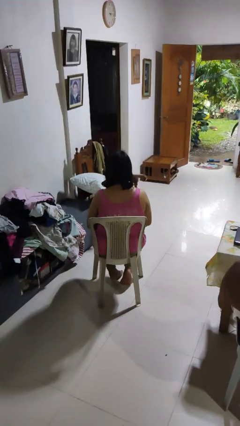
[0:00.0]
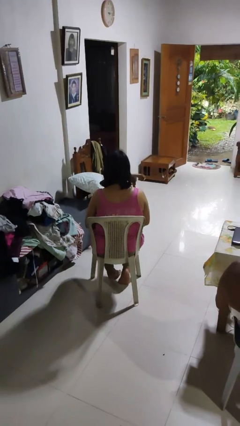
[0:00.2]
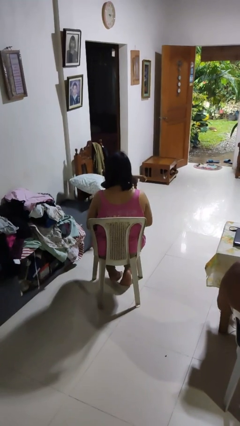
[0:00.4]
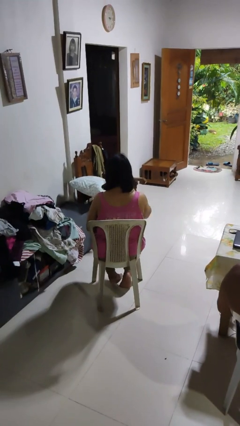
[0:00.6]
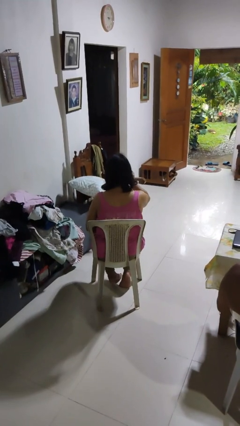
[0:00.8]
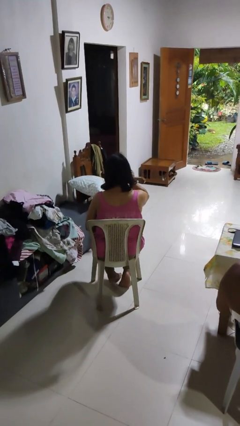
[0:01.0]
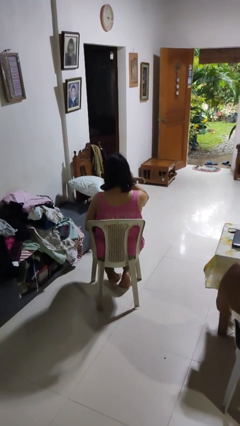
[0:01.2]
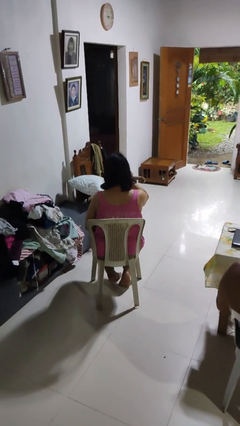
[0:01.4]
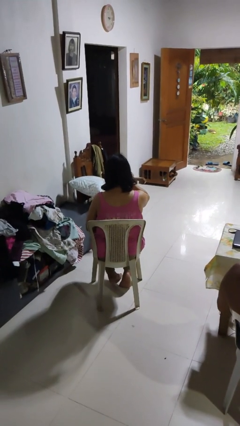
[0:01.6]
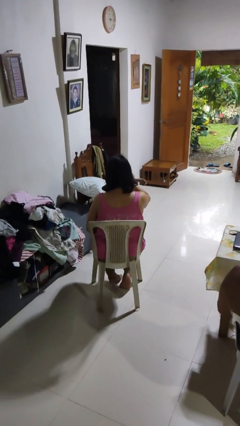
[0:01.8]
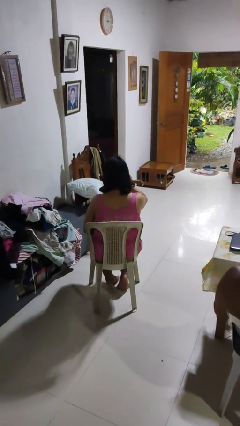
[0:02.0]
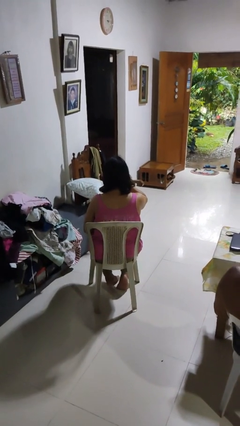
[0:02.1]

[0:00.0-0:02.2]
person touches earlobe

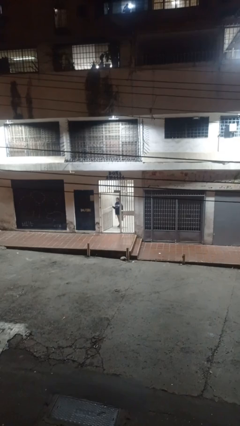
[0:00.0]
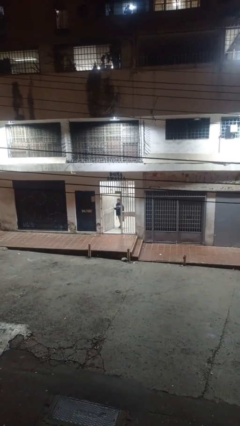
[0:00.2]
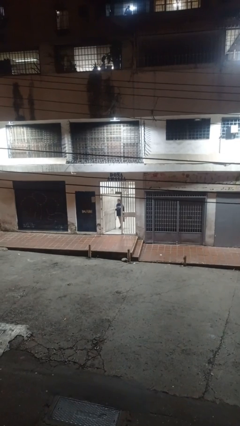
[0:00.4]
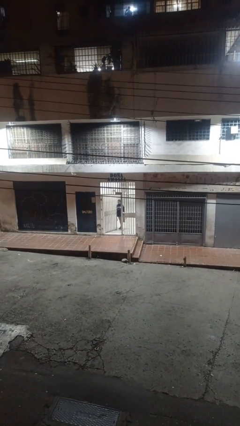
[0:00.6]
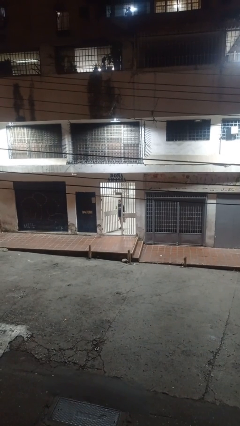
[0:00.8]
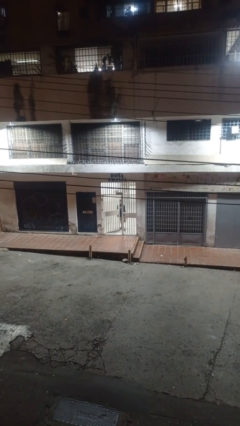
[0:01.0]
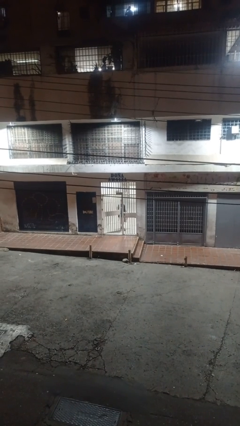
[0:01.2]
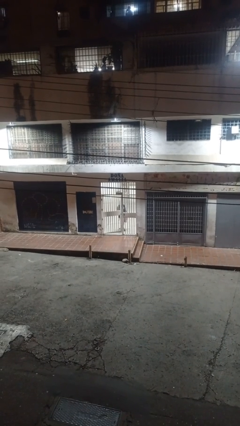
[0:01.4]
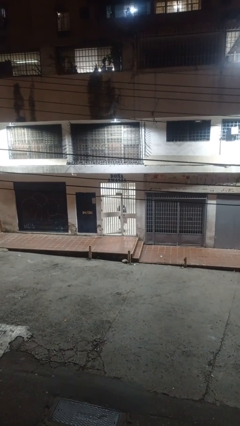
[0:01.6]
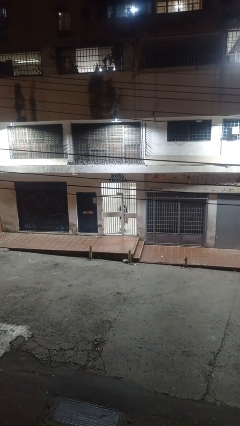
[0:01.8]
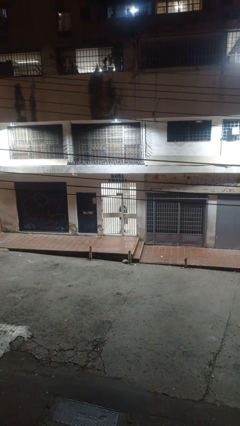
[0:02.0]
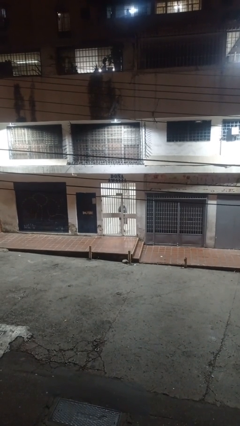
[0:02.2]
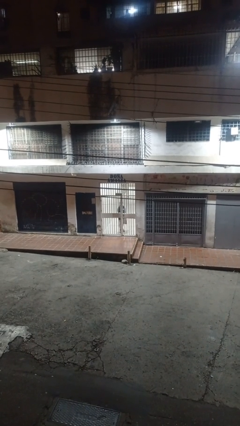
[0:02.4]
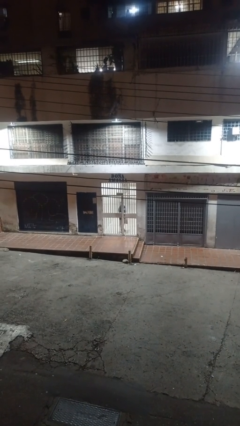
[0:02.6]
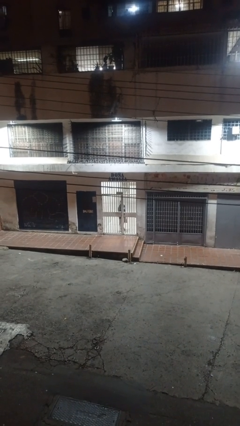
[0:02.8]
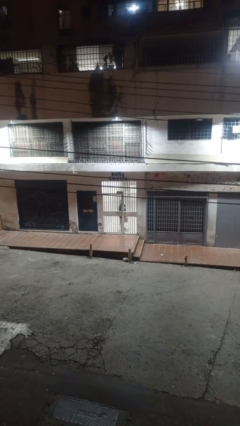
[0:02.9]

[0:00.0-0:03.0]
person closes gate

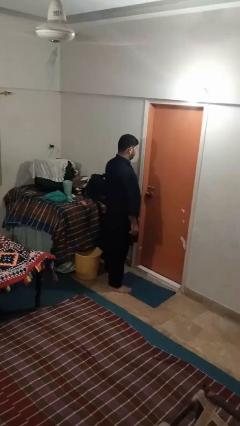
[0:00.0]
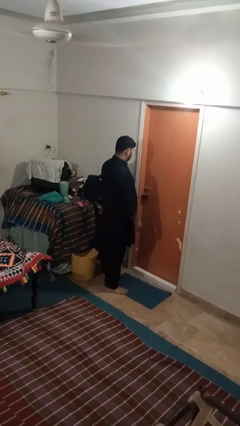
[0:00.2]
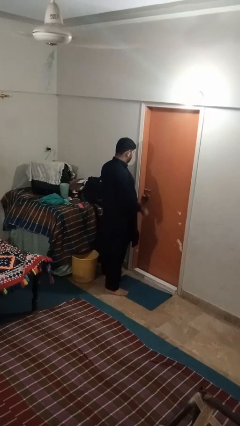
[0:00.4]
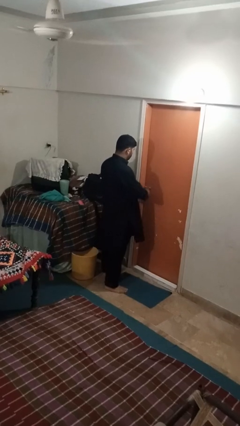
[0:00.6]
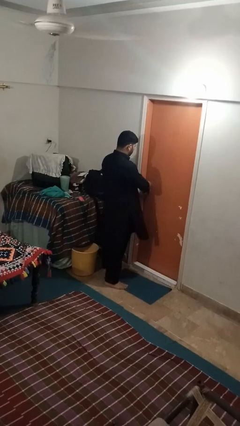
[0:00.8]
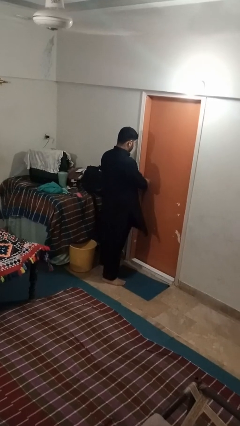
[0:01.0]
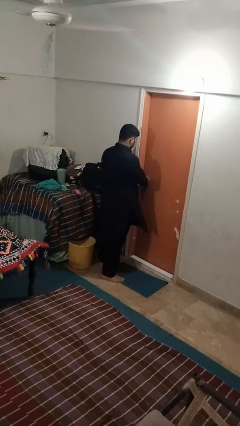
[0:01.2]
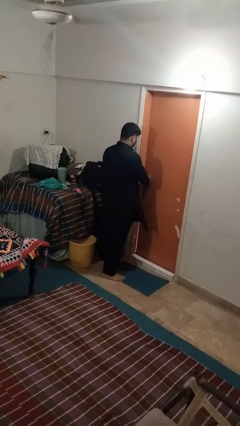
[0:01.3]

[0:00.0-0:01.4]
person unlocks door with keys

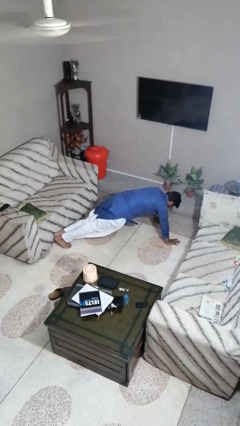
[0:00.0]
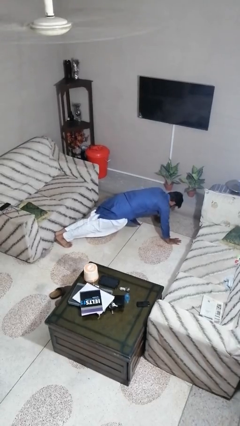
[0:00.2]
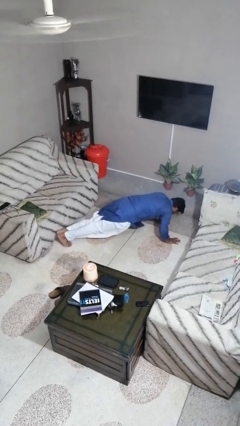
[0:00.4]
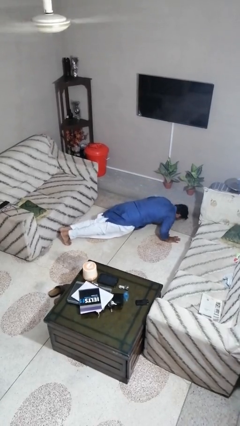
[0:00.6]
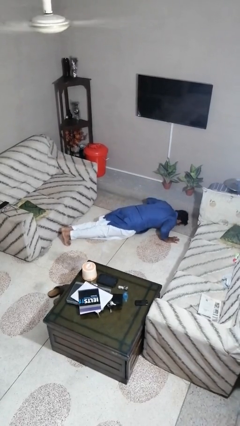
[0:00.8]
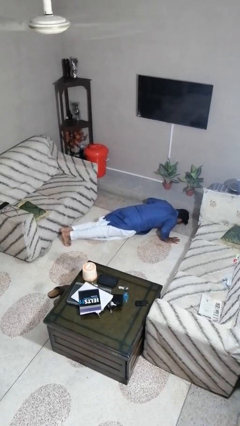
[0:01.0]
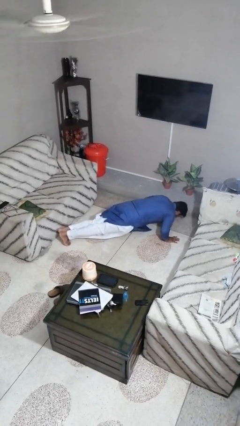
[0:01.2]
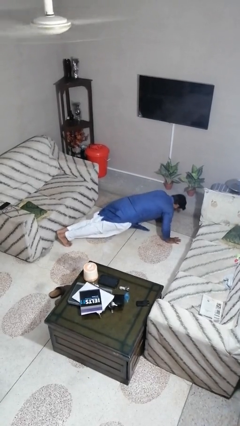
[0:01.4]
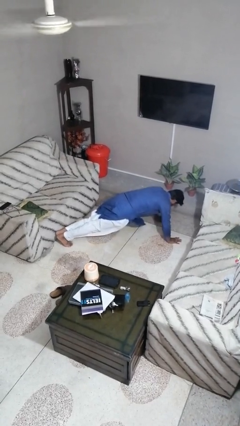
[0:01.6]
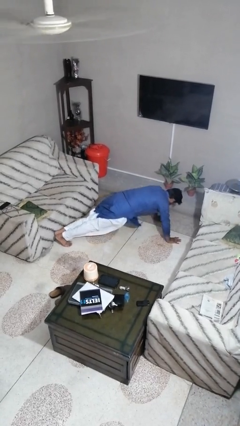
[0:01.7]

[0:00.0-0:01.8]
person exercises with pushup

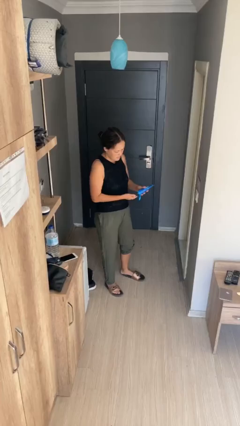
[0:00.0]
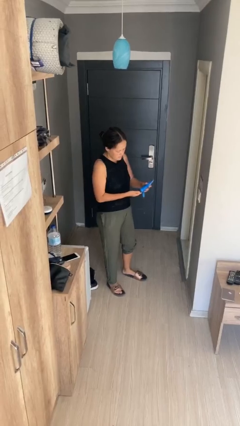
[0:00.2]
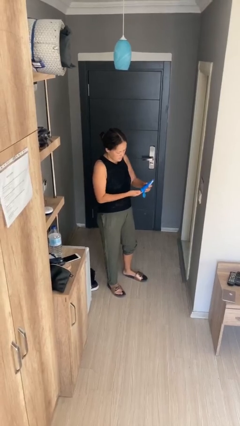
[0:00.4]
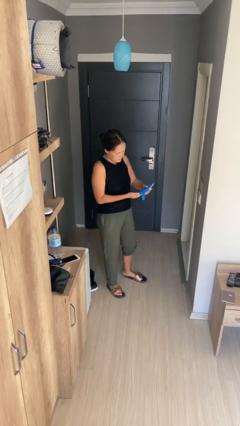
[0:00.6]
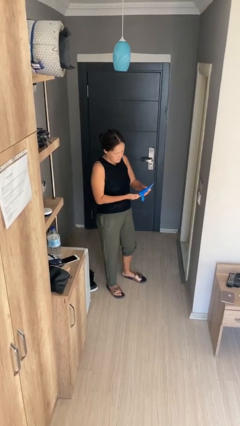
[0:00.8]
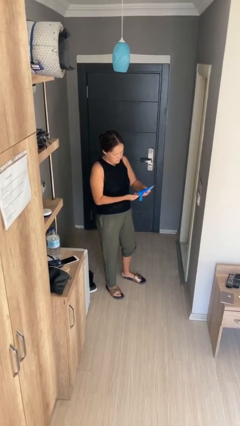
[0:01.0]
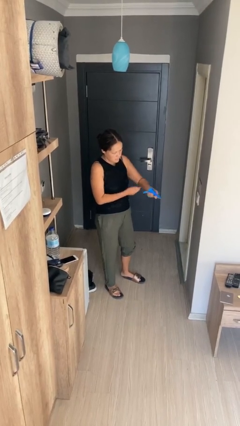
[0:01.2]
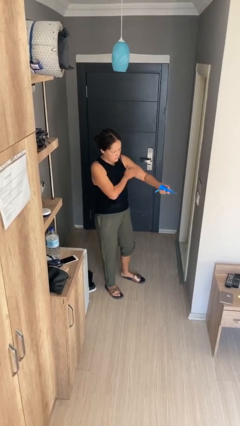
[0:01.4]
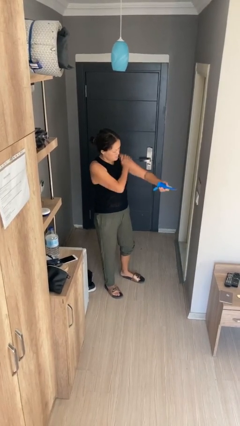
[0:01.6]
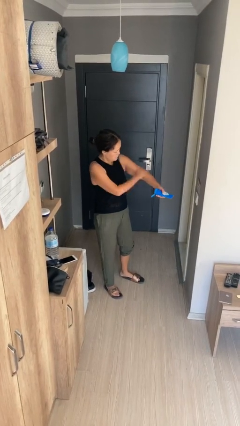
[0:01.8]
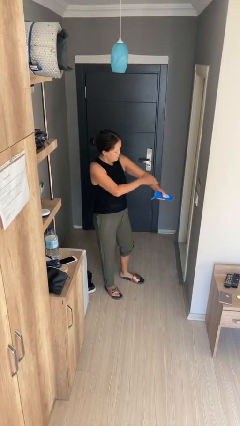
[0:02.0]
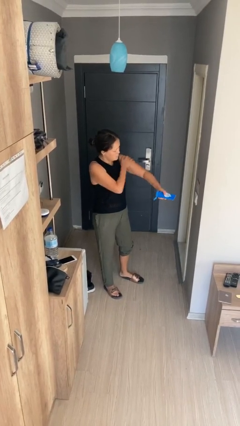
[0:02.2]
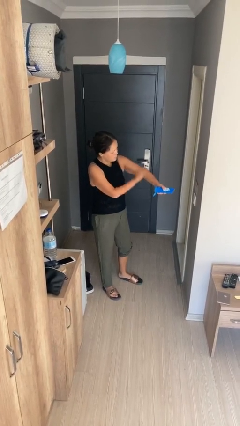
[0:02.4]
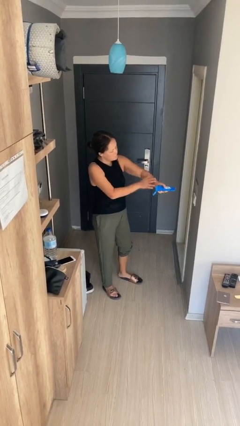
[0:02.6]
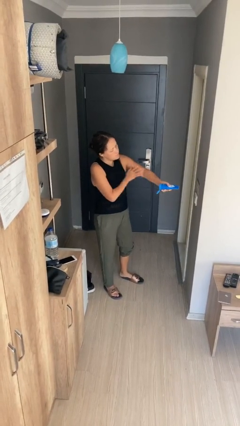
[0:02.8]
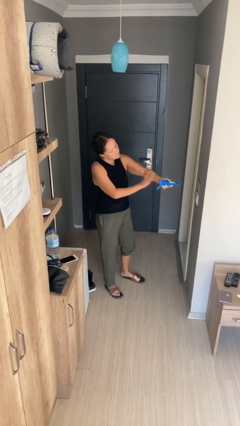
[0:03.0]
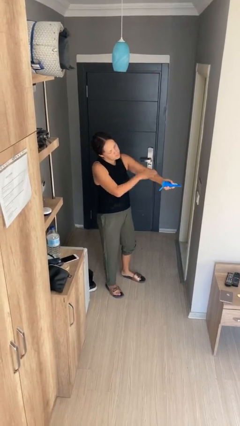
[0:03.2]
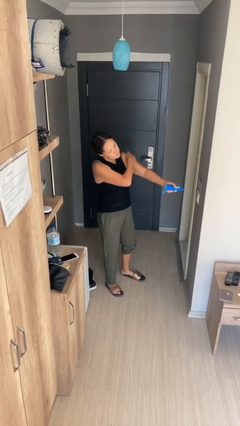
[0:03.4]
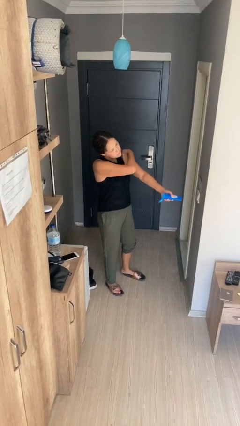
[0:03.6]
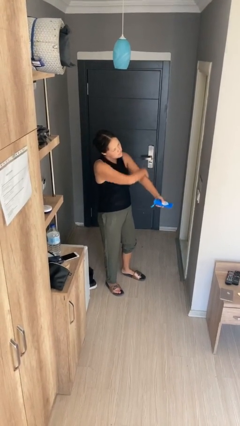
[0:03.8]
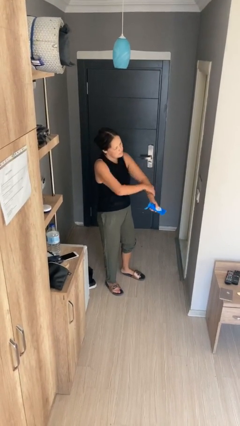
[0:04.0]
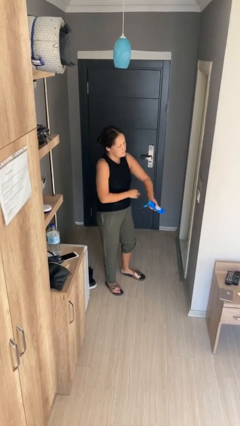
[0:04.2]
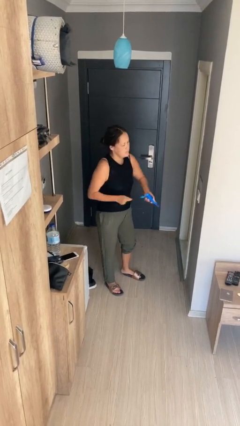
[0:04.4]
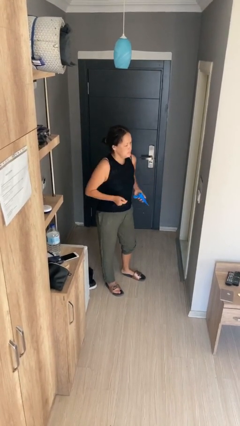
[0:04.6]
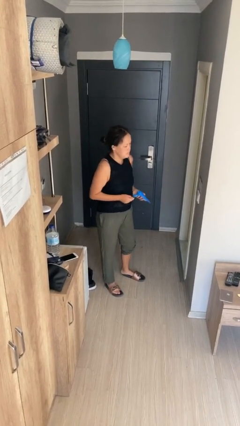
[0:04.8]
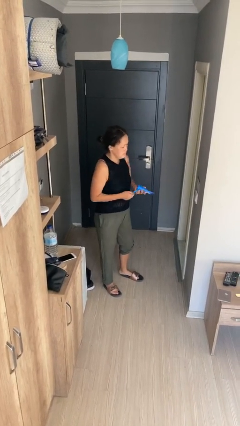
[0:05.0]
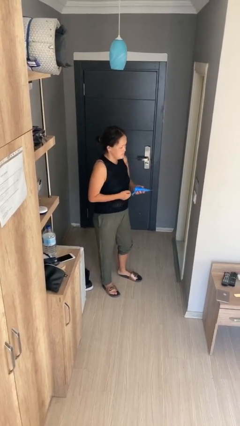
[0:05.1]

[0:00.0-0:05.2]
person applies sunscreen

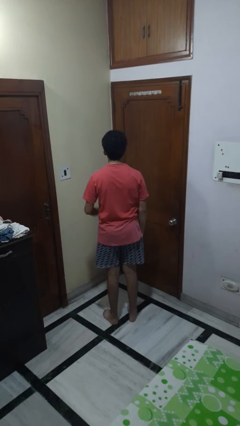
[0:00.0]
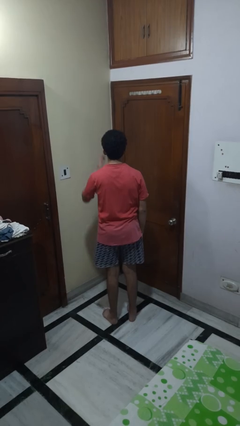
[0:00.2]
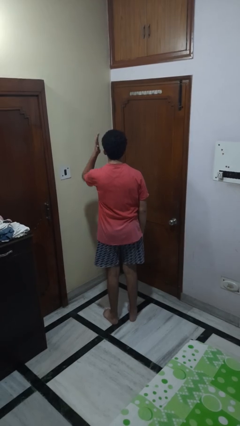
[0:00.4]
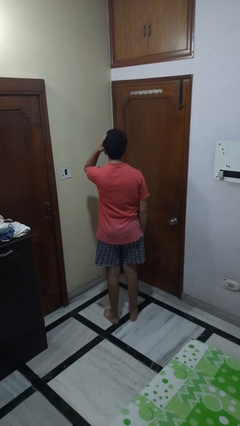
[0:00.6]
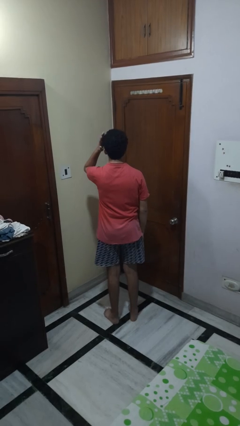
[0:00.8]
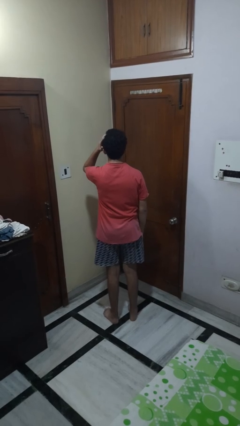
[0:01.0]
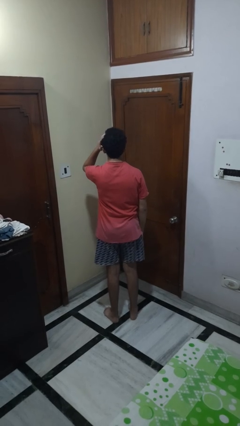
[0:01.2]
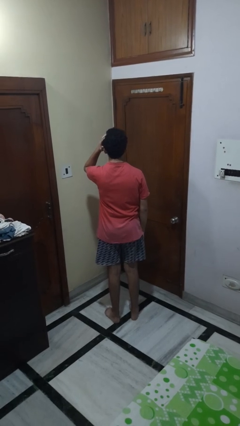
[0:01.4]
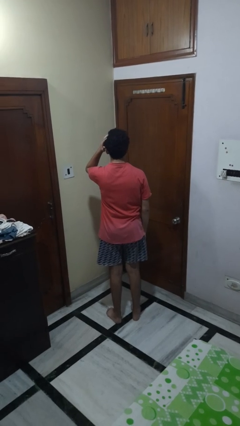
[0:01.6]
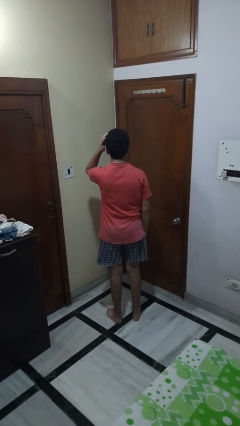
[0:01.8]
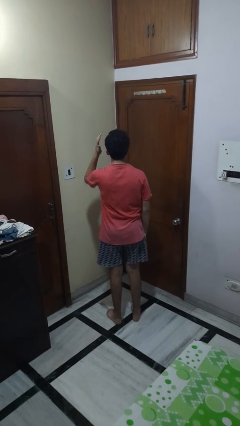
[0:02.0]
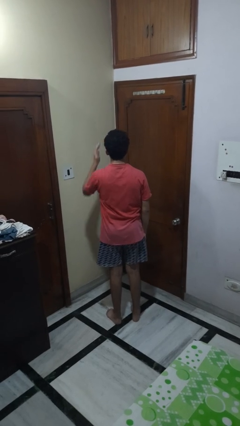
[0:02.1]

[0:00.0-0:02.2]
person pats head

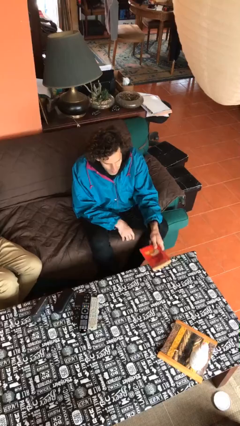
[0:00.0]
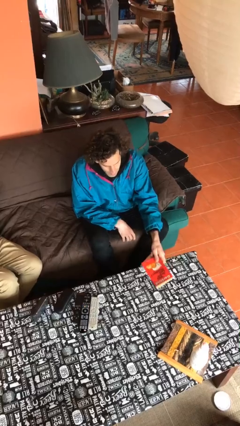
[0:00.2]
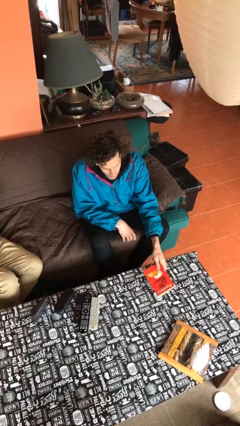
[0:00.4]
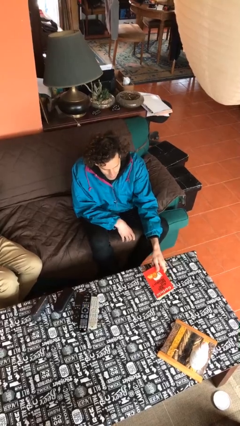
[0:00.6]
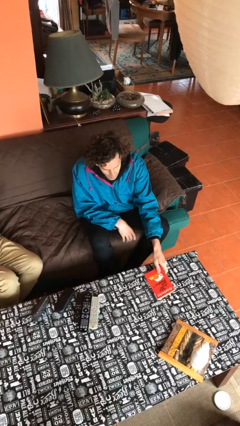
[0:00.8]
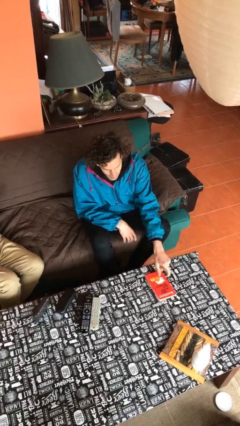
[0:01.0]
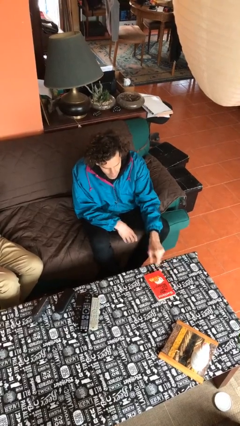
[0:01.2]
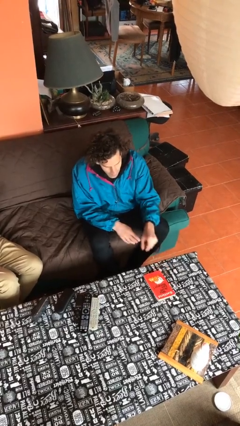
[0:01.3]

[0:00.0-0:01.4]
person puts down object on table

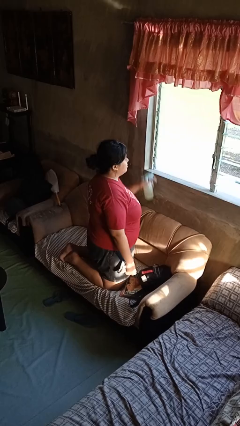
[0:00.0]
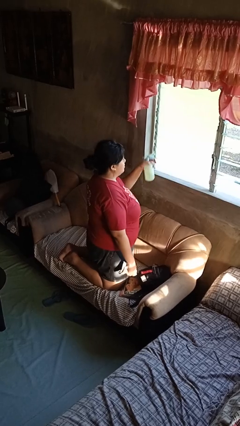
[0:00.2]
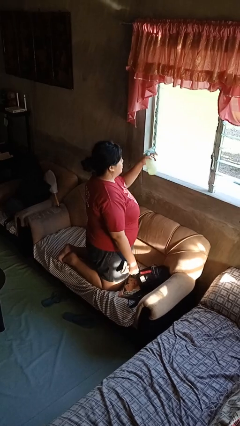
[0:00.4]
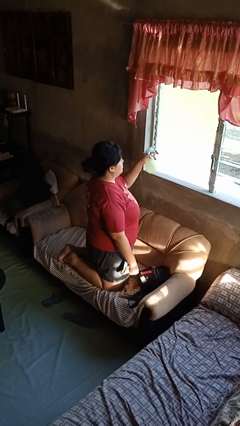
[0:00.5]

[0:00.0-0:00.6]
person sprays from bottle
